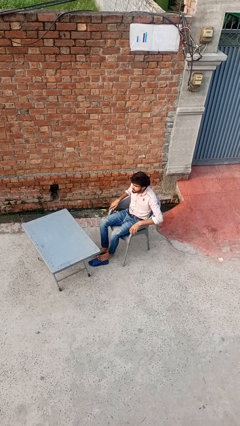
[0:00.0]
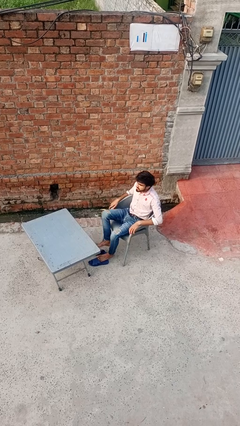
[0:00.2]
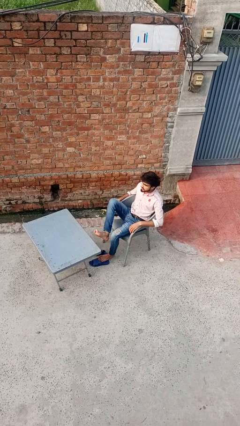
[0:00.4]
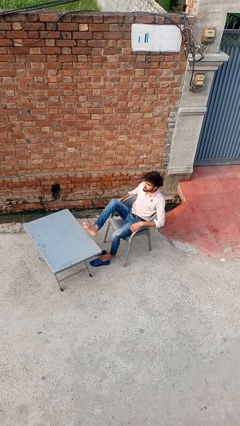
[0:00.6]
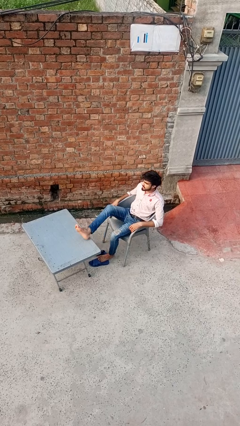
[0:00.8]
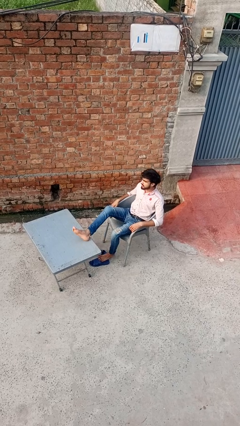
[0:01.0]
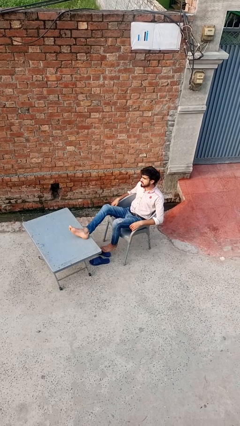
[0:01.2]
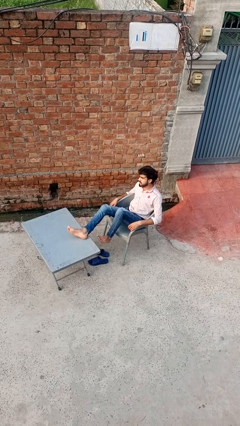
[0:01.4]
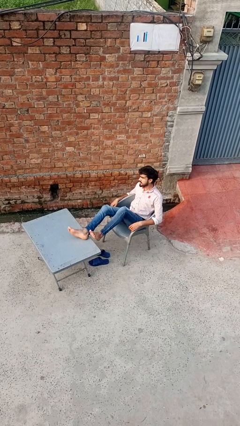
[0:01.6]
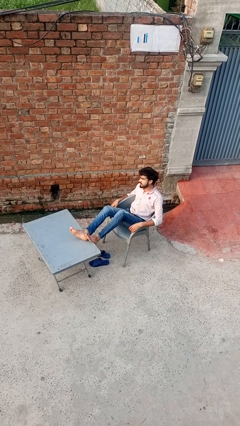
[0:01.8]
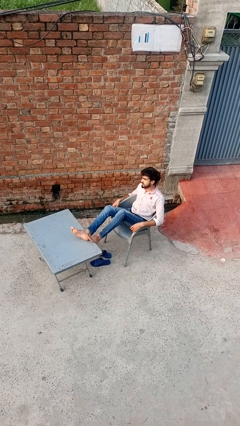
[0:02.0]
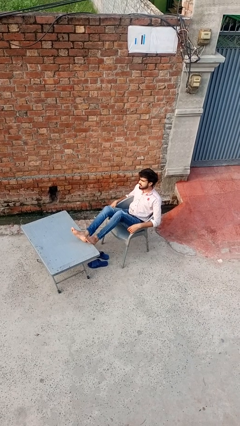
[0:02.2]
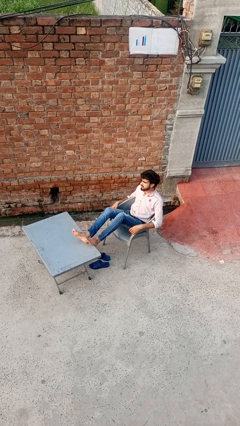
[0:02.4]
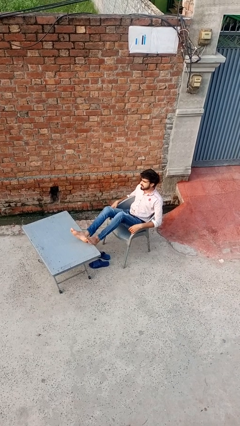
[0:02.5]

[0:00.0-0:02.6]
person puts feet up

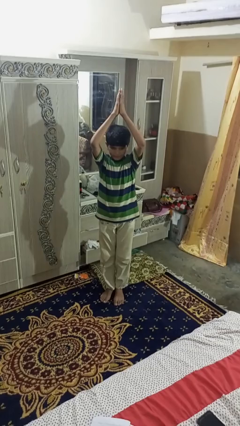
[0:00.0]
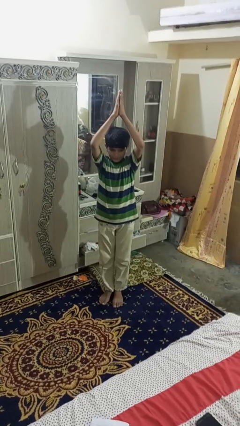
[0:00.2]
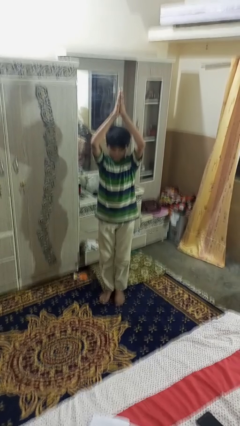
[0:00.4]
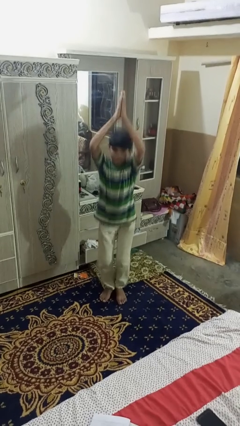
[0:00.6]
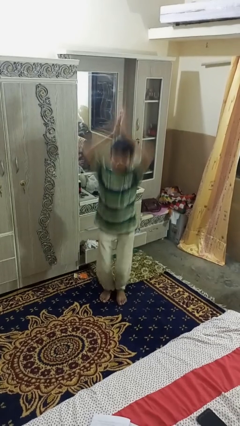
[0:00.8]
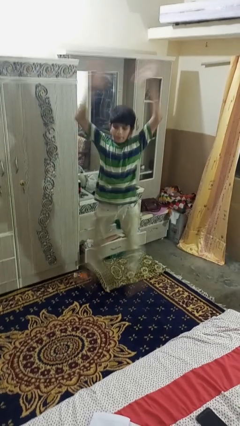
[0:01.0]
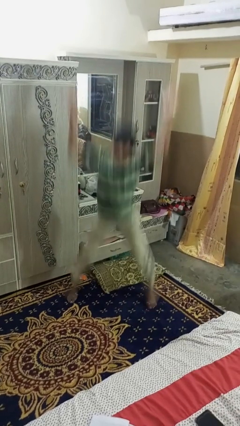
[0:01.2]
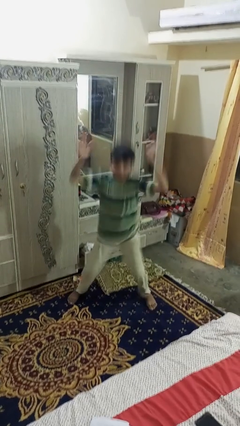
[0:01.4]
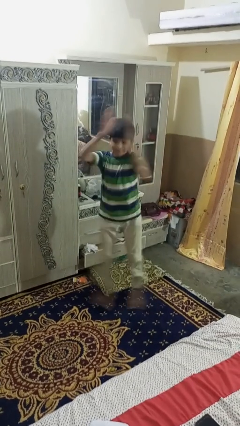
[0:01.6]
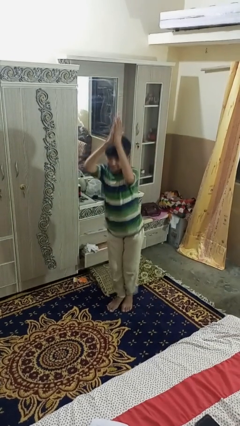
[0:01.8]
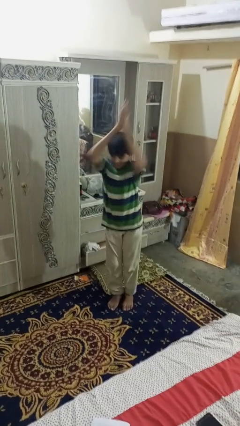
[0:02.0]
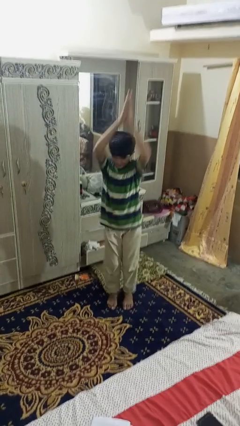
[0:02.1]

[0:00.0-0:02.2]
person exercises with jumping jacks

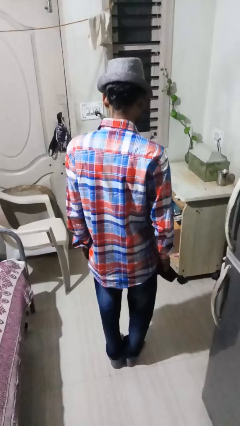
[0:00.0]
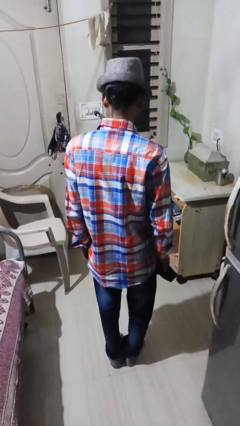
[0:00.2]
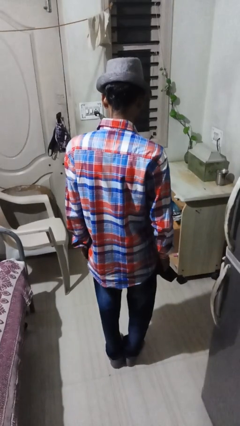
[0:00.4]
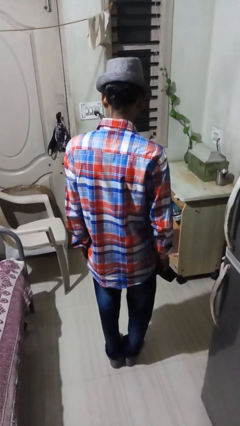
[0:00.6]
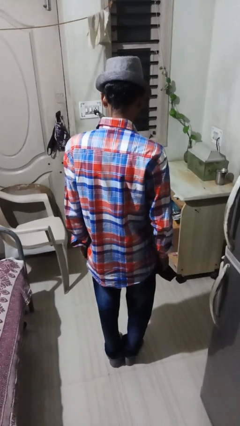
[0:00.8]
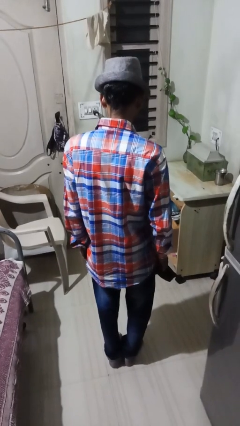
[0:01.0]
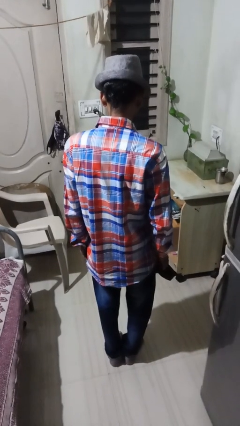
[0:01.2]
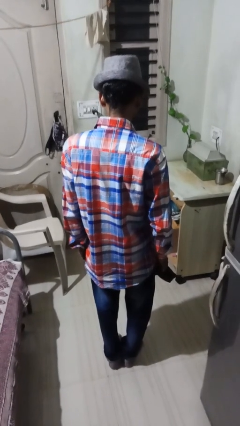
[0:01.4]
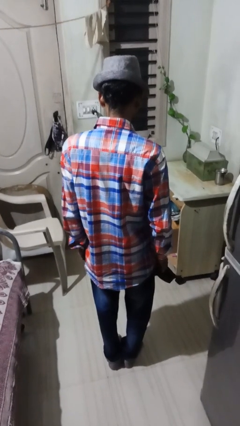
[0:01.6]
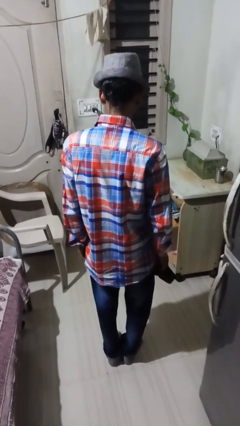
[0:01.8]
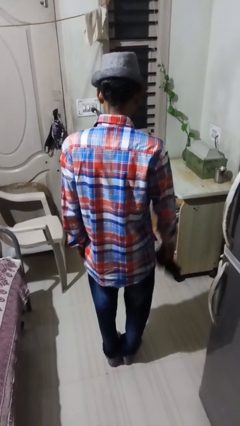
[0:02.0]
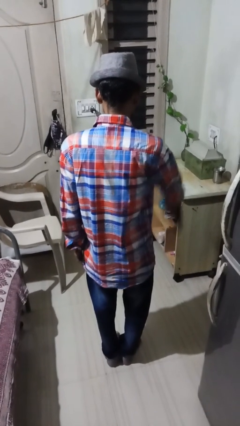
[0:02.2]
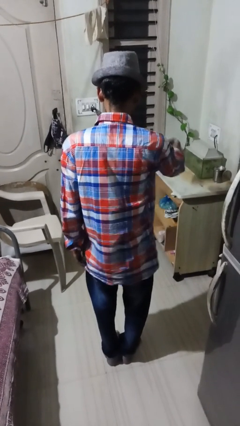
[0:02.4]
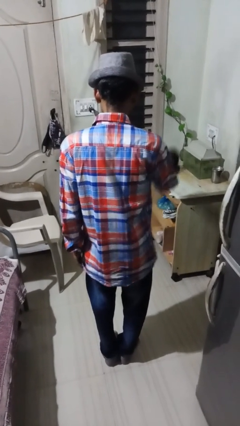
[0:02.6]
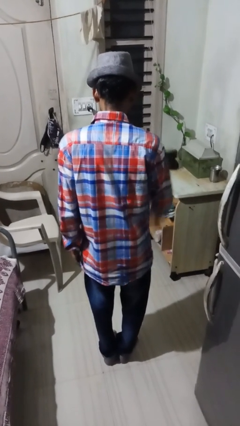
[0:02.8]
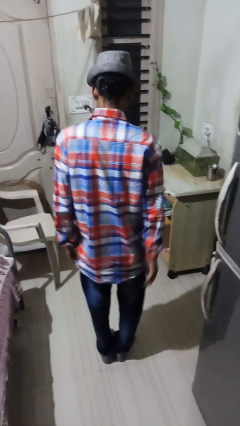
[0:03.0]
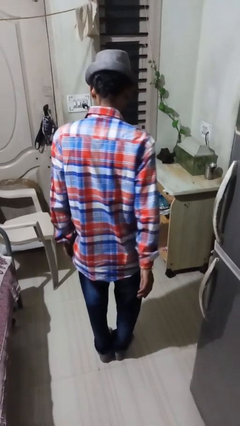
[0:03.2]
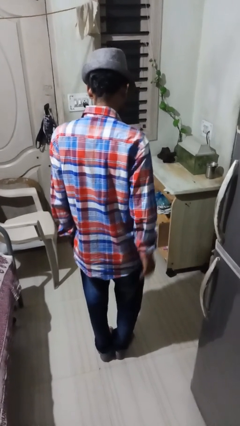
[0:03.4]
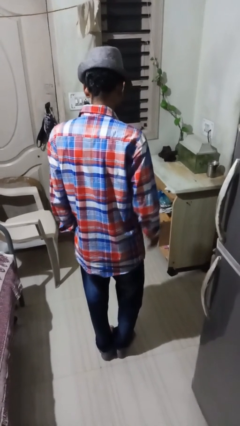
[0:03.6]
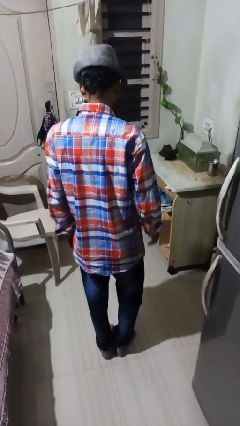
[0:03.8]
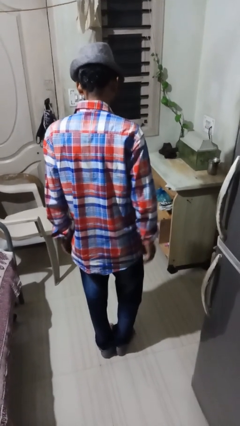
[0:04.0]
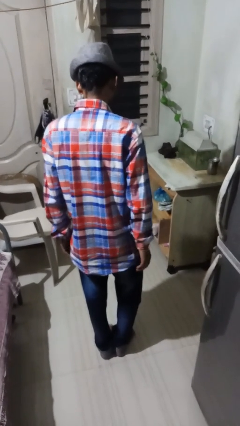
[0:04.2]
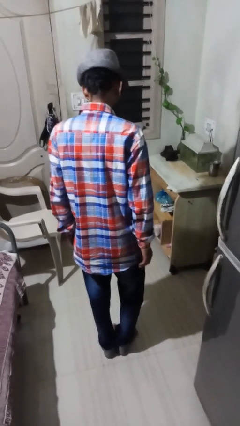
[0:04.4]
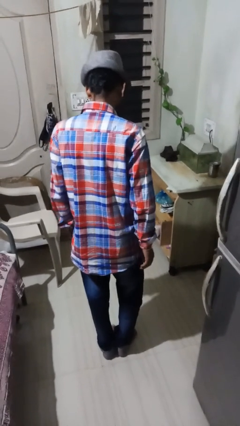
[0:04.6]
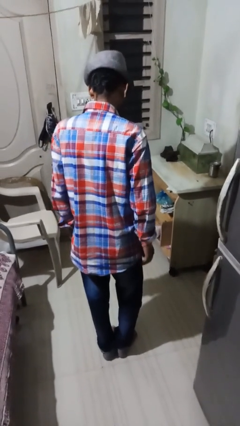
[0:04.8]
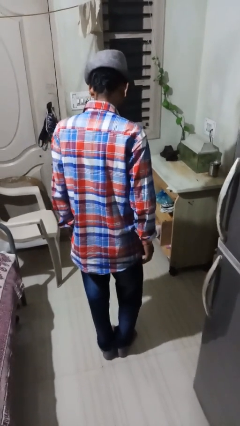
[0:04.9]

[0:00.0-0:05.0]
person throws object on table

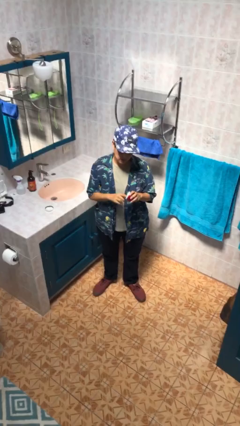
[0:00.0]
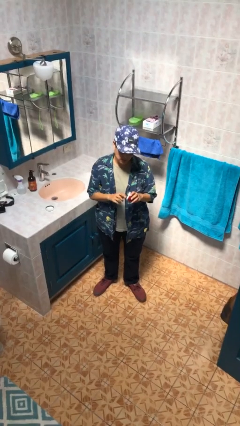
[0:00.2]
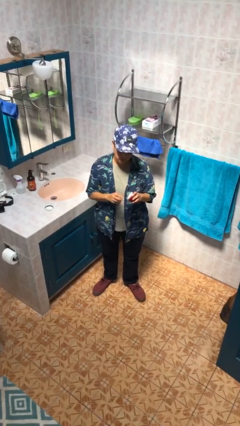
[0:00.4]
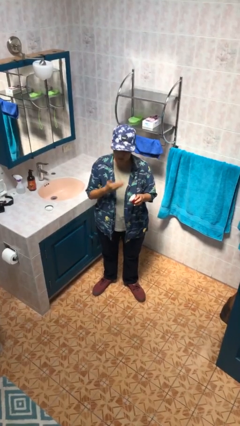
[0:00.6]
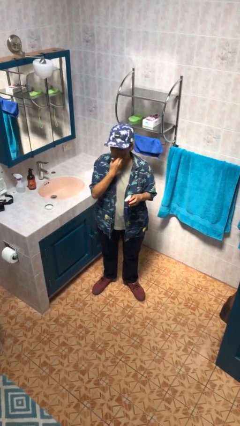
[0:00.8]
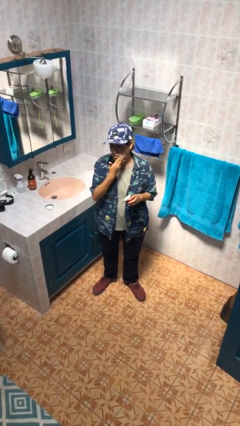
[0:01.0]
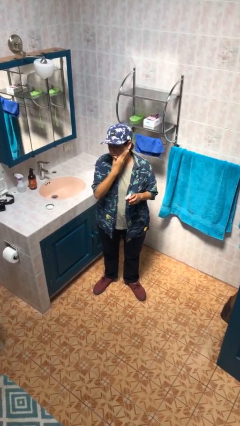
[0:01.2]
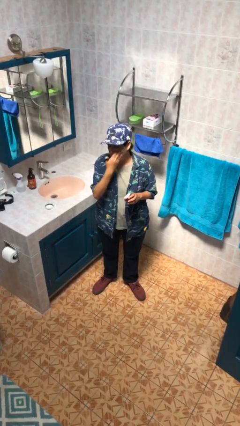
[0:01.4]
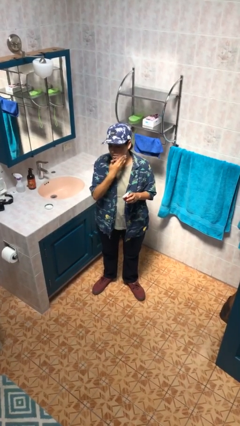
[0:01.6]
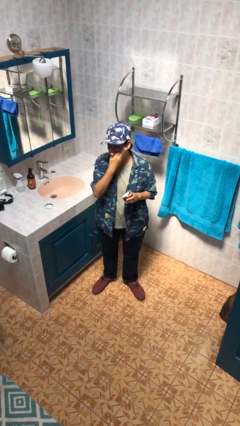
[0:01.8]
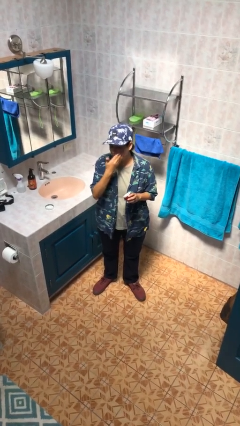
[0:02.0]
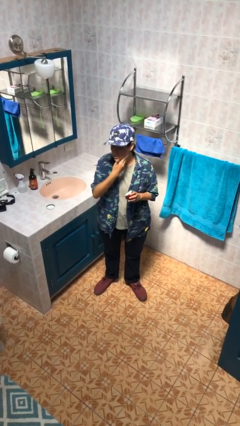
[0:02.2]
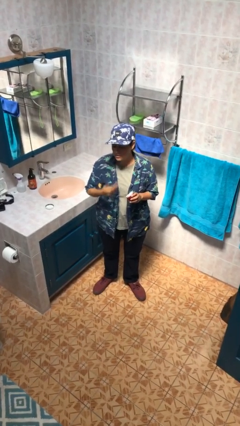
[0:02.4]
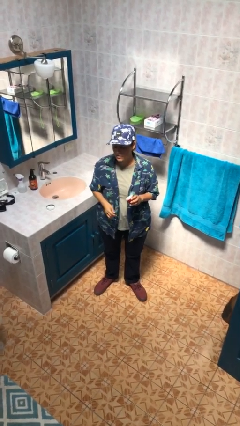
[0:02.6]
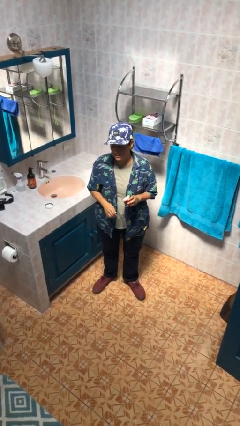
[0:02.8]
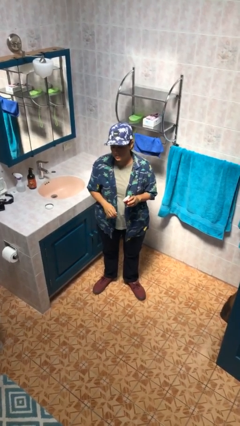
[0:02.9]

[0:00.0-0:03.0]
person applies facial moisturizer

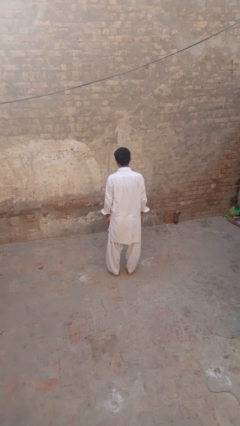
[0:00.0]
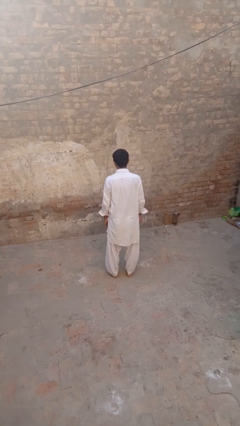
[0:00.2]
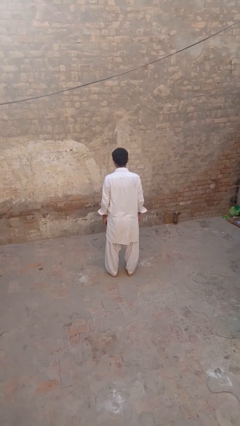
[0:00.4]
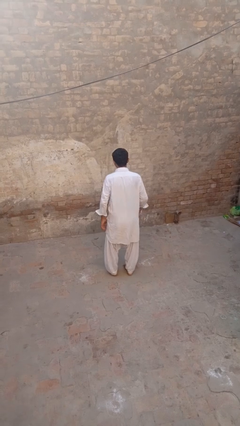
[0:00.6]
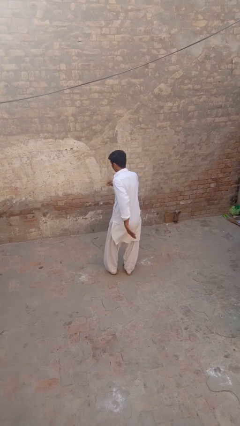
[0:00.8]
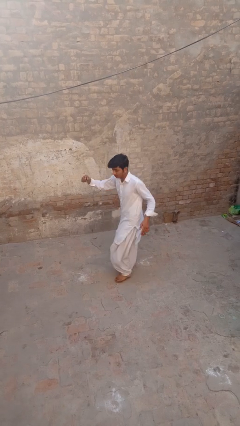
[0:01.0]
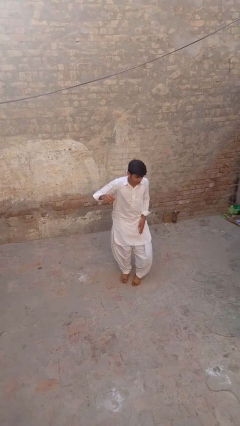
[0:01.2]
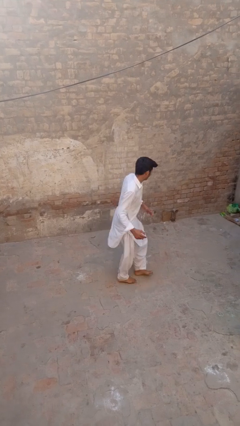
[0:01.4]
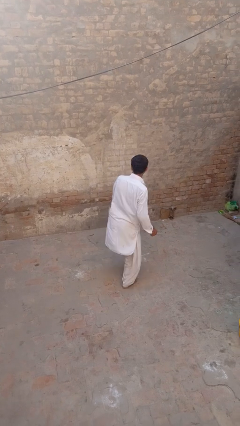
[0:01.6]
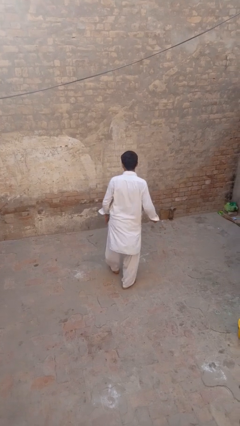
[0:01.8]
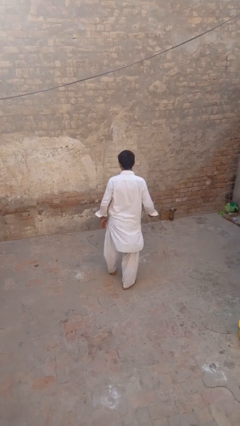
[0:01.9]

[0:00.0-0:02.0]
person twirls

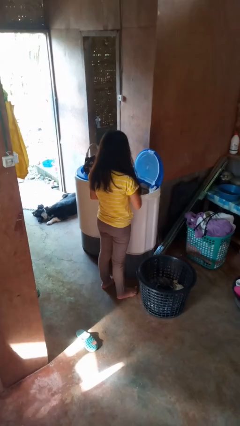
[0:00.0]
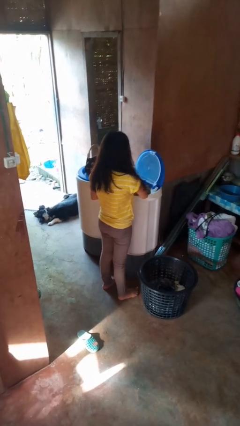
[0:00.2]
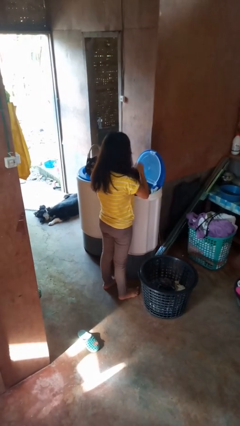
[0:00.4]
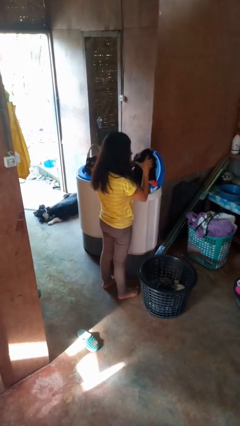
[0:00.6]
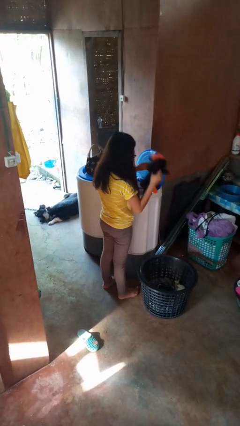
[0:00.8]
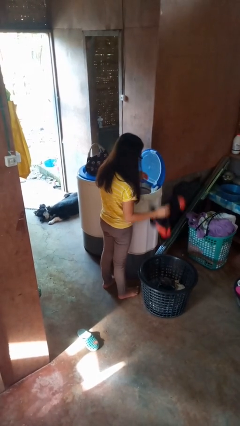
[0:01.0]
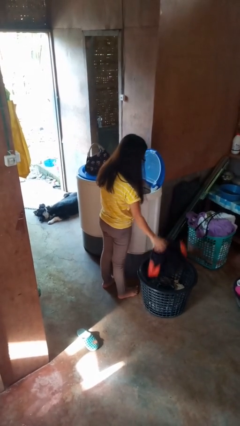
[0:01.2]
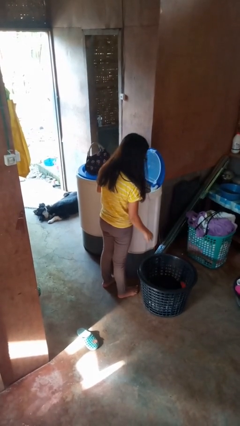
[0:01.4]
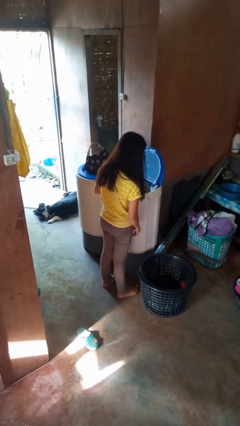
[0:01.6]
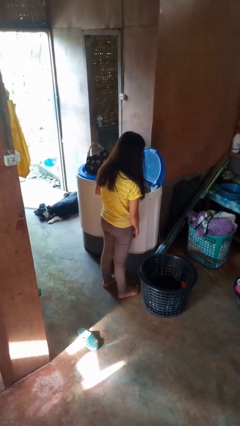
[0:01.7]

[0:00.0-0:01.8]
person unloads clotheswasher

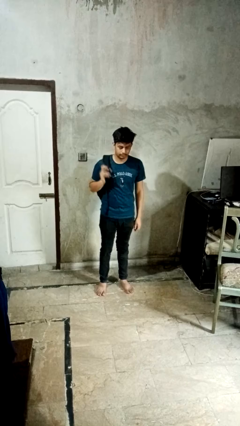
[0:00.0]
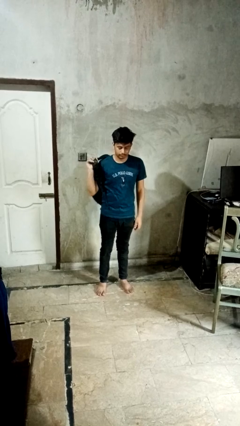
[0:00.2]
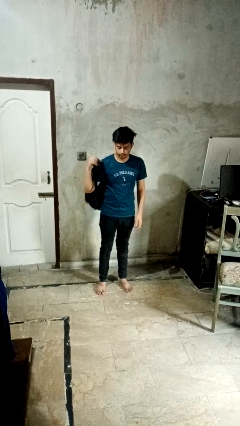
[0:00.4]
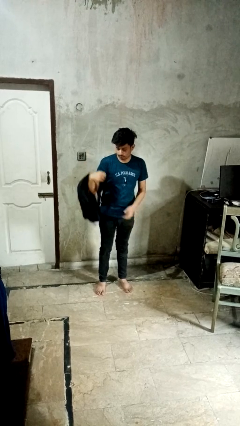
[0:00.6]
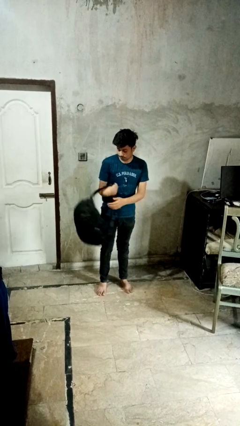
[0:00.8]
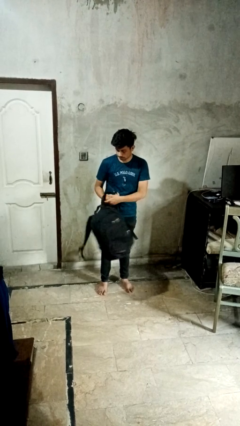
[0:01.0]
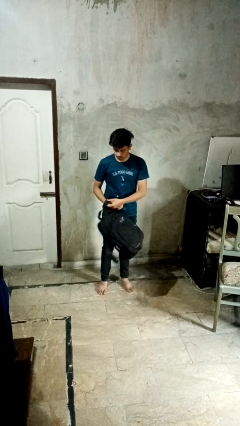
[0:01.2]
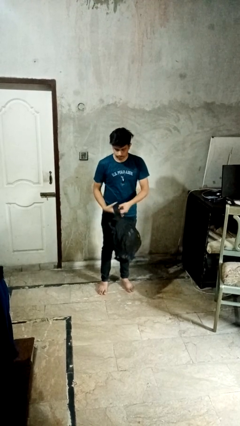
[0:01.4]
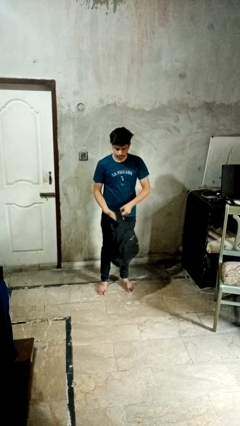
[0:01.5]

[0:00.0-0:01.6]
person takes off backpack
